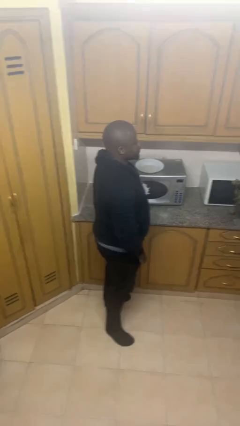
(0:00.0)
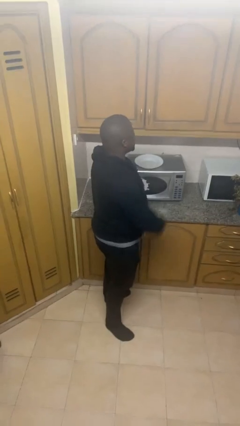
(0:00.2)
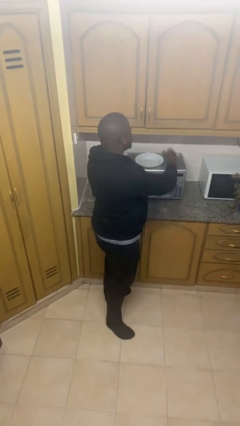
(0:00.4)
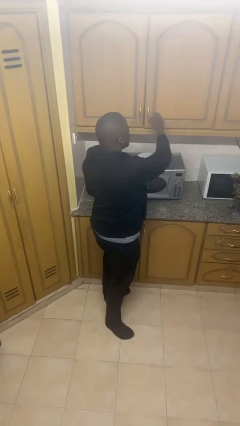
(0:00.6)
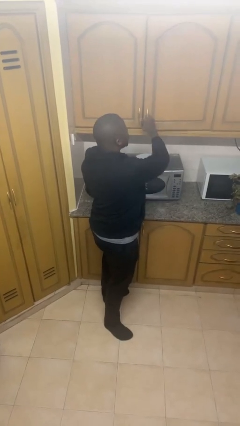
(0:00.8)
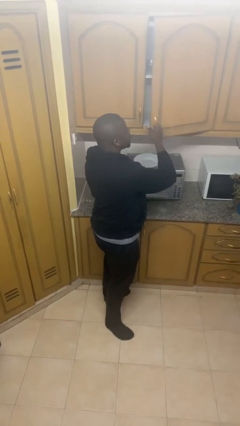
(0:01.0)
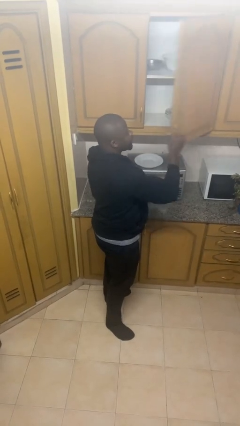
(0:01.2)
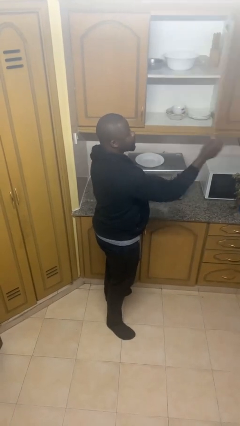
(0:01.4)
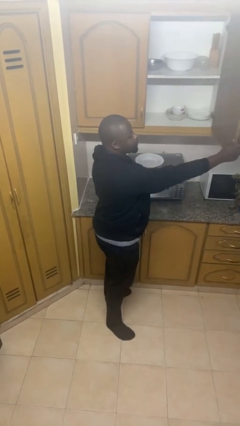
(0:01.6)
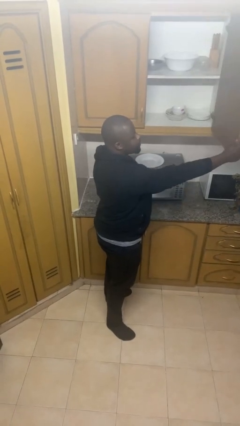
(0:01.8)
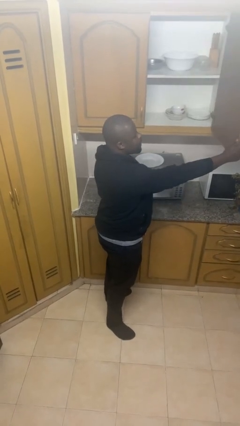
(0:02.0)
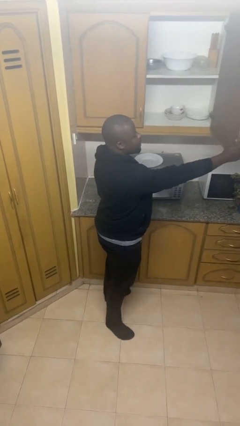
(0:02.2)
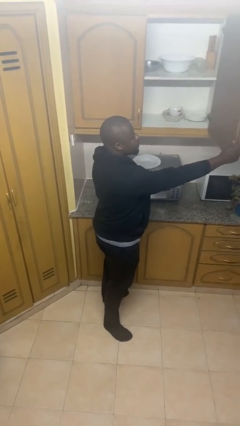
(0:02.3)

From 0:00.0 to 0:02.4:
person opens cabinet

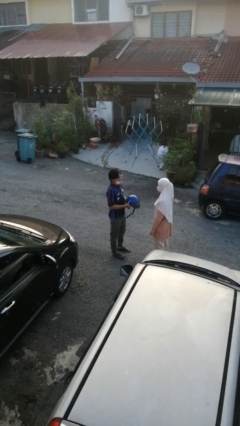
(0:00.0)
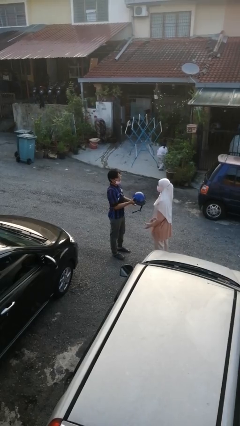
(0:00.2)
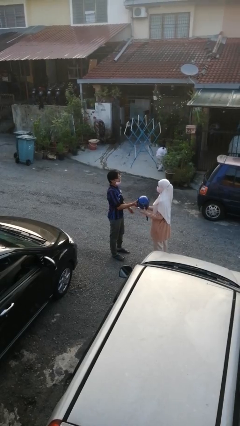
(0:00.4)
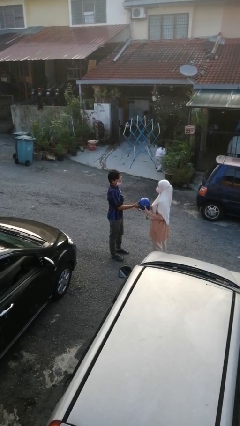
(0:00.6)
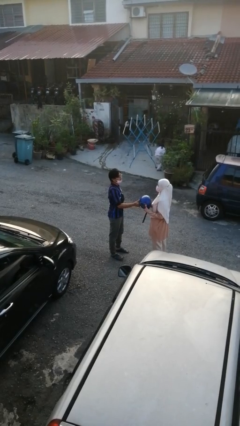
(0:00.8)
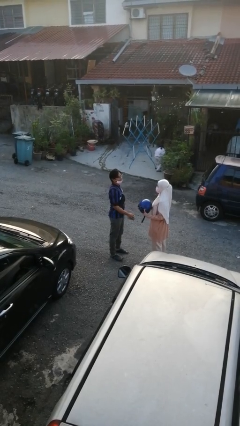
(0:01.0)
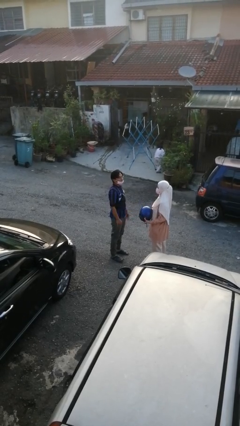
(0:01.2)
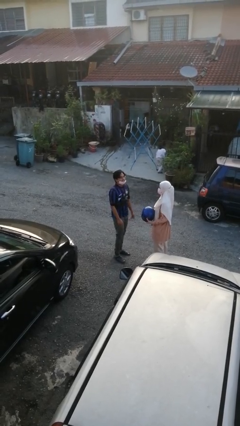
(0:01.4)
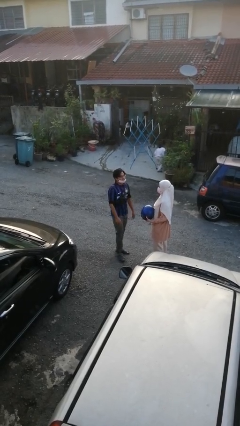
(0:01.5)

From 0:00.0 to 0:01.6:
person transfers object to person

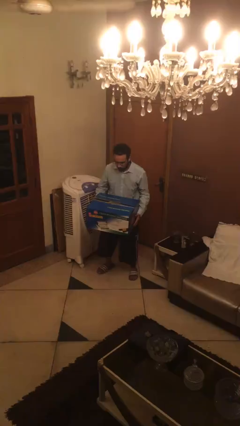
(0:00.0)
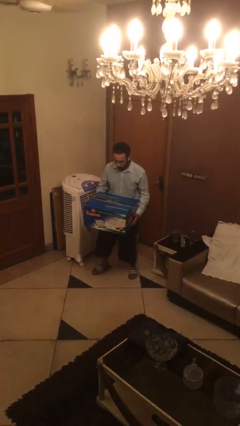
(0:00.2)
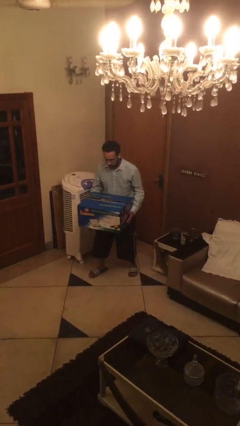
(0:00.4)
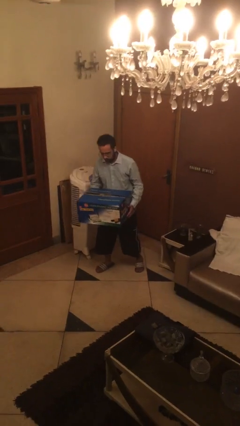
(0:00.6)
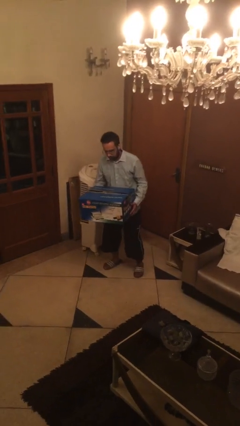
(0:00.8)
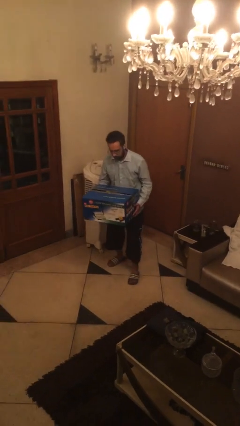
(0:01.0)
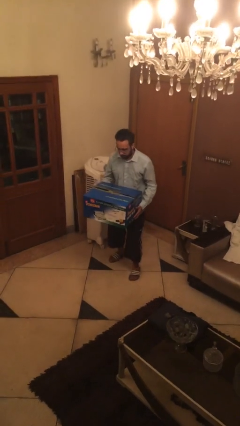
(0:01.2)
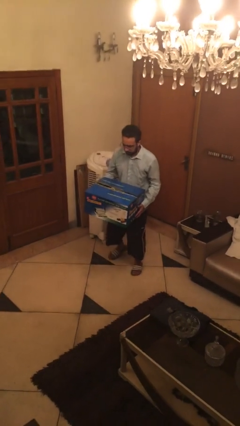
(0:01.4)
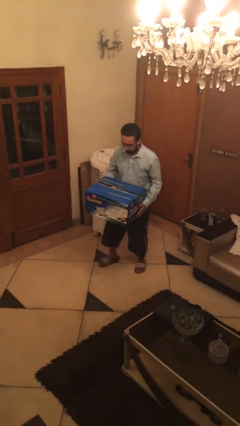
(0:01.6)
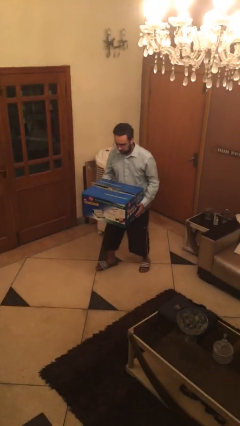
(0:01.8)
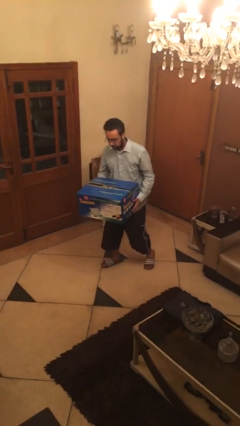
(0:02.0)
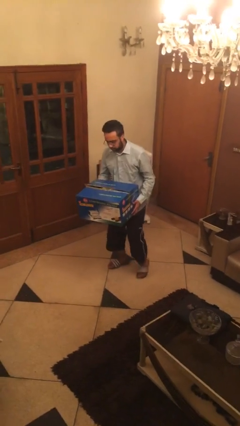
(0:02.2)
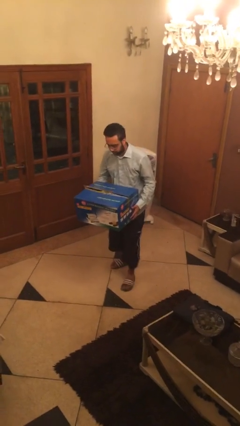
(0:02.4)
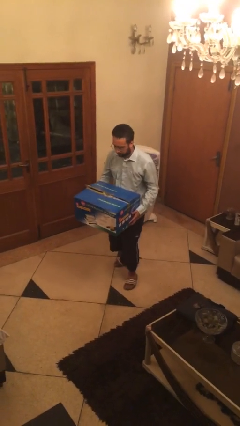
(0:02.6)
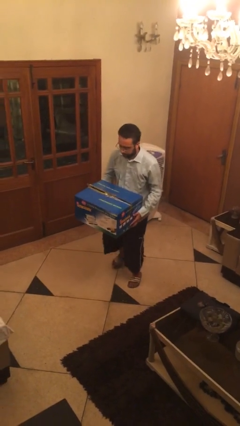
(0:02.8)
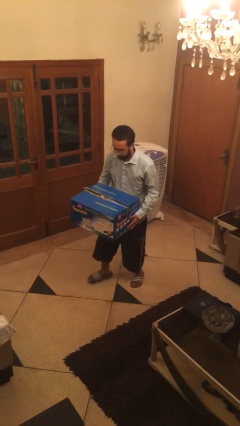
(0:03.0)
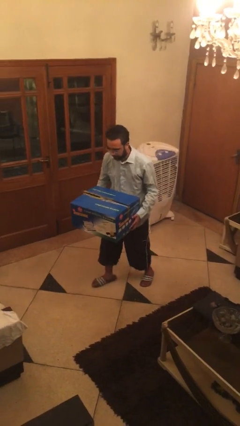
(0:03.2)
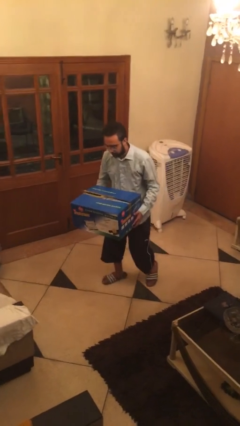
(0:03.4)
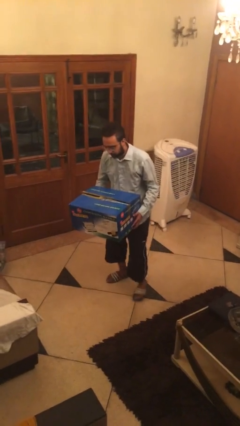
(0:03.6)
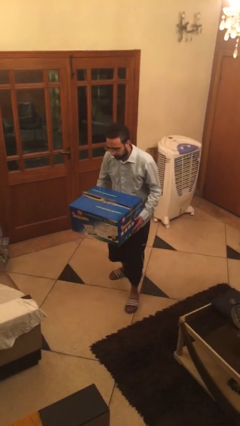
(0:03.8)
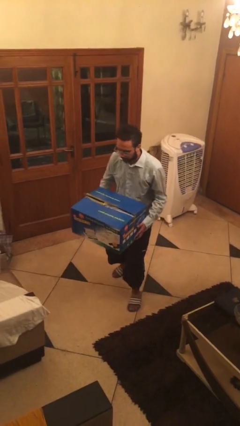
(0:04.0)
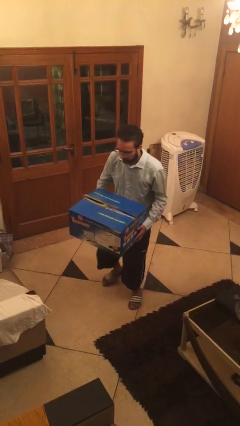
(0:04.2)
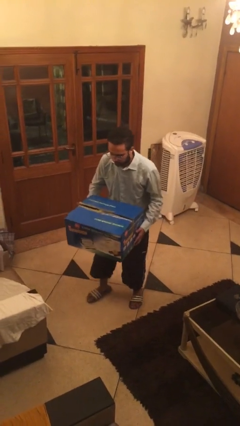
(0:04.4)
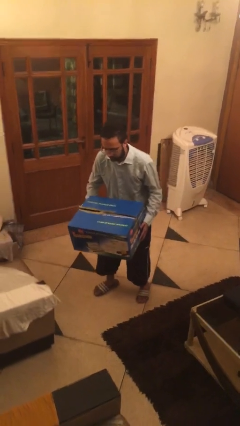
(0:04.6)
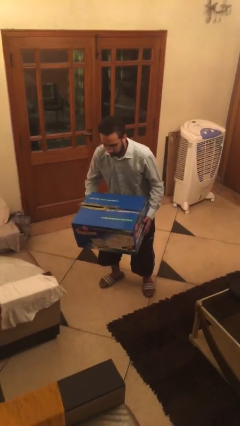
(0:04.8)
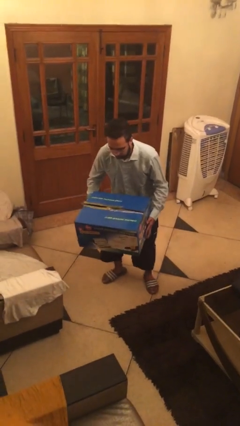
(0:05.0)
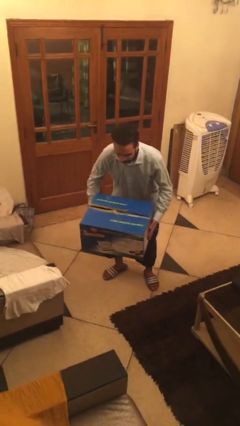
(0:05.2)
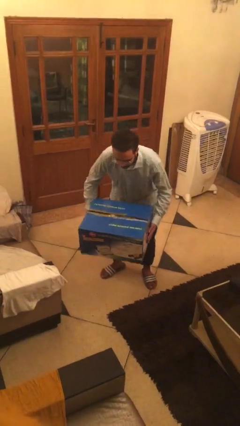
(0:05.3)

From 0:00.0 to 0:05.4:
person carries heavy object

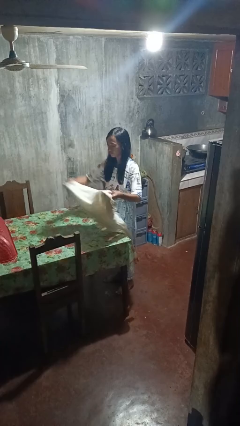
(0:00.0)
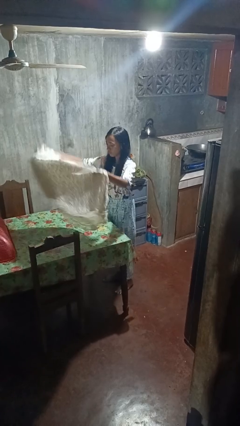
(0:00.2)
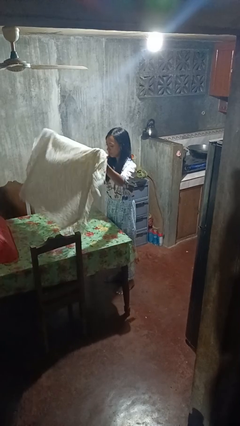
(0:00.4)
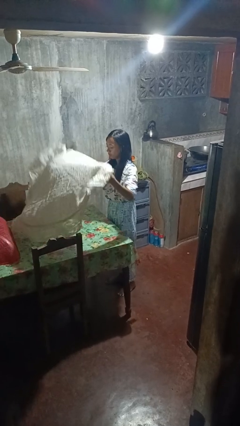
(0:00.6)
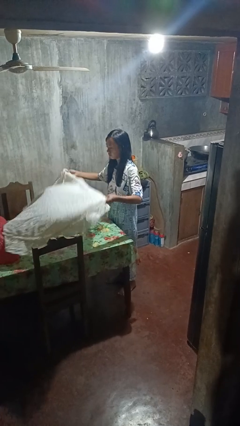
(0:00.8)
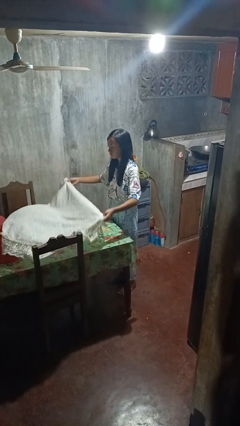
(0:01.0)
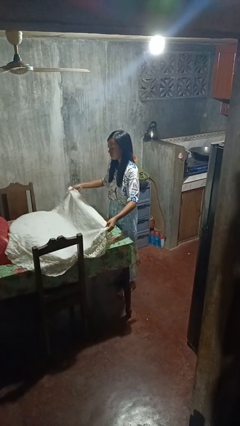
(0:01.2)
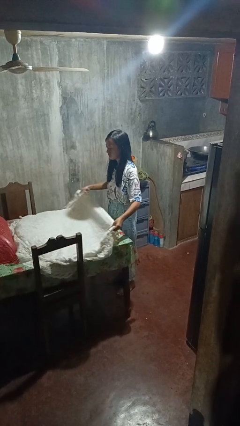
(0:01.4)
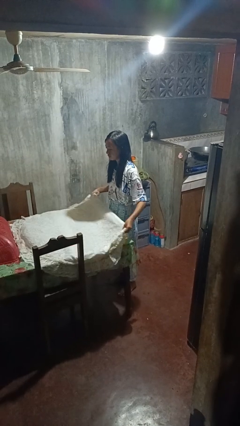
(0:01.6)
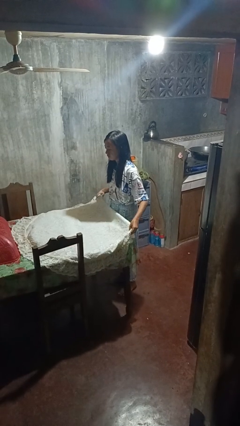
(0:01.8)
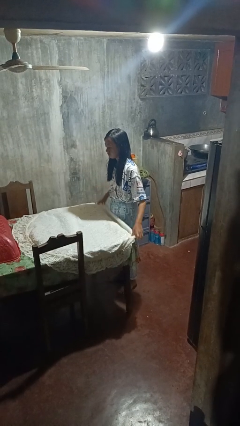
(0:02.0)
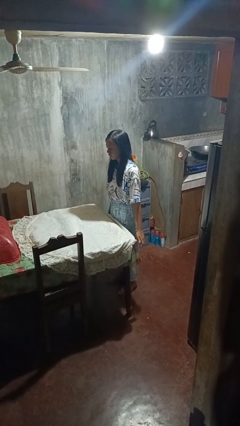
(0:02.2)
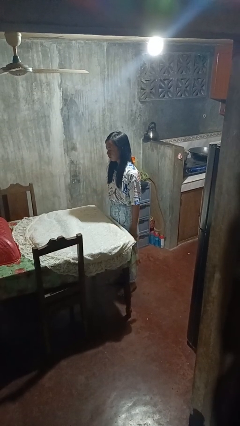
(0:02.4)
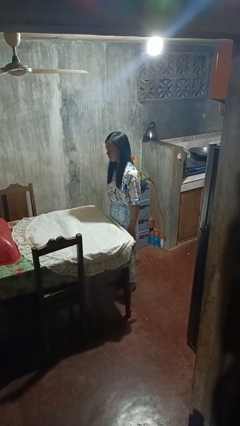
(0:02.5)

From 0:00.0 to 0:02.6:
person spreads tablecloth

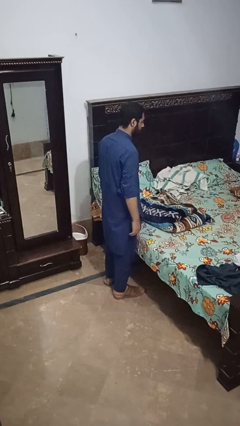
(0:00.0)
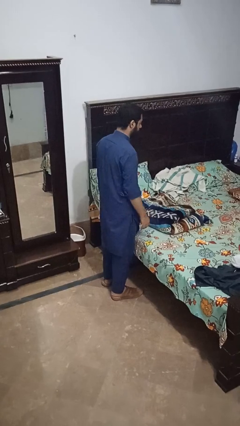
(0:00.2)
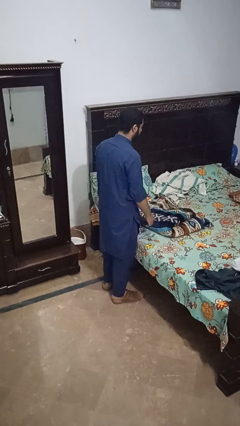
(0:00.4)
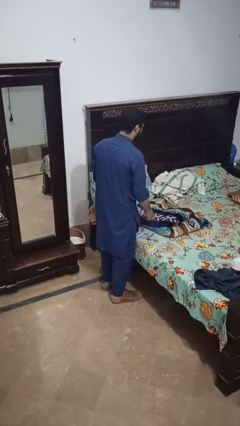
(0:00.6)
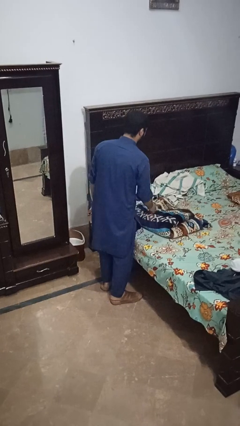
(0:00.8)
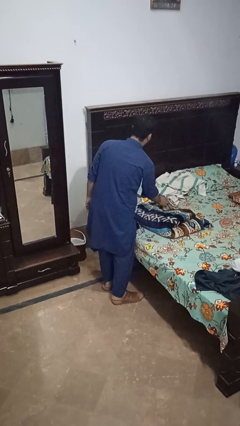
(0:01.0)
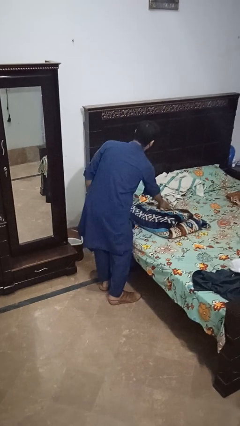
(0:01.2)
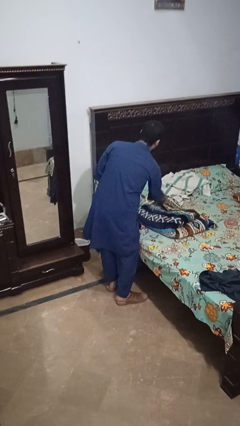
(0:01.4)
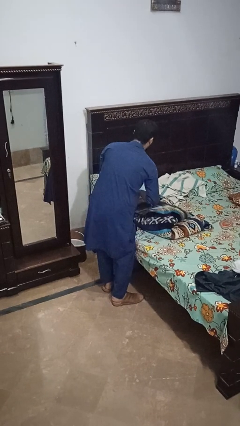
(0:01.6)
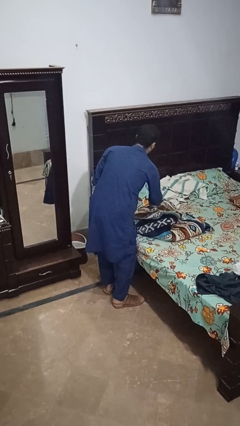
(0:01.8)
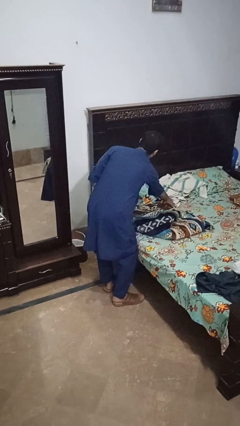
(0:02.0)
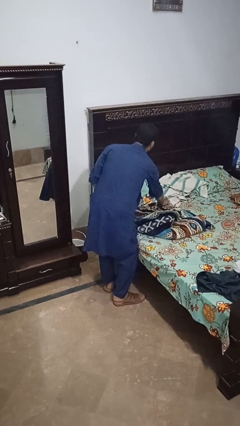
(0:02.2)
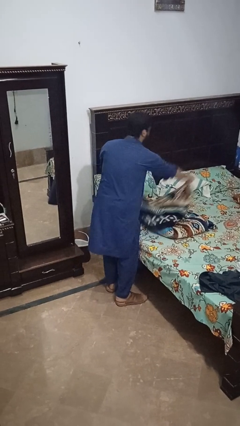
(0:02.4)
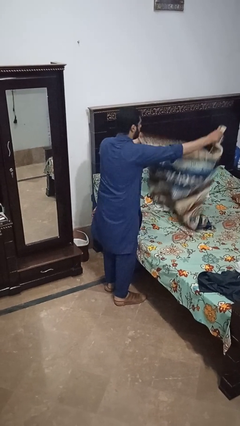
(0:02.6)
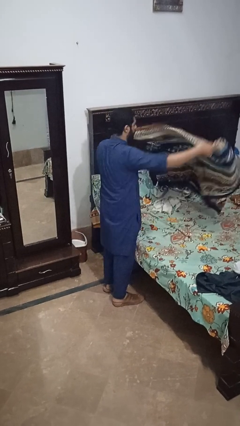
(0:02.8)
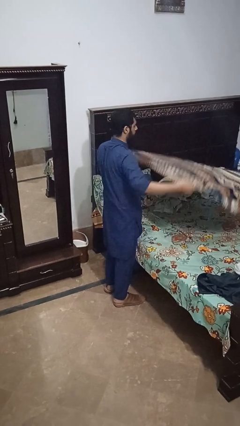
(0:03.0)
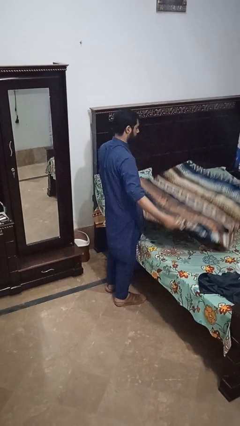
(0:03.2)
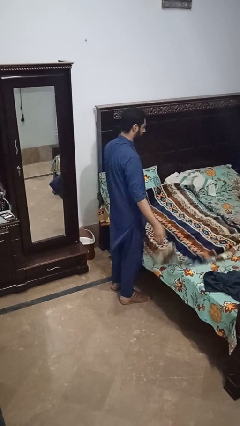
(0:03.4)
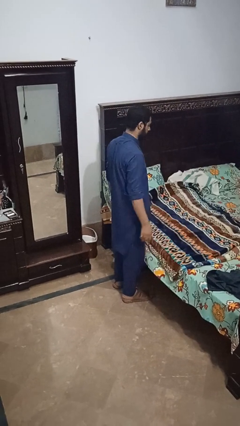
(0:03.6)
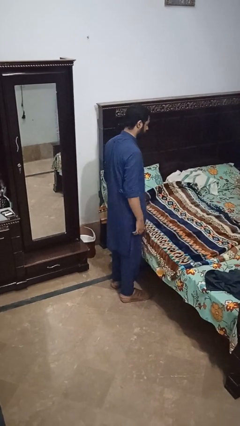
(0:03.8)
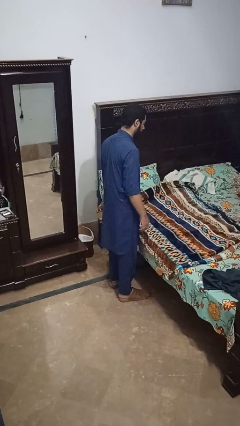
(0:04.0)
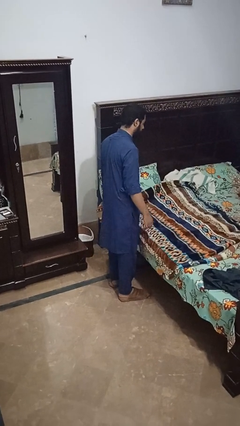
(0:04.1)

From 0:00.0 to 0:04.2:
person unfolds blanket

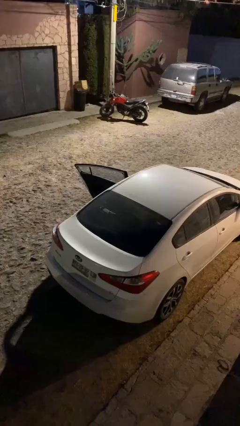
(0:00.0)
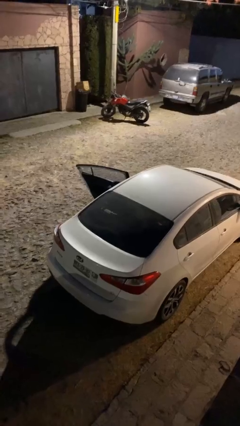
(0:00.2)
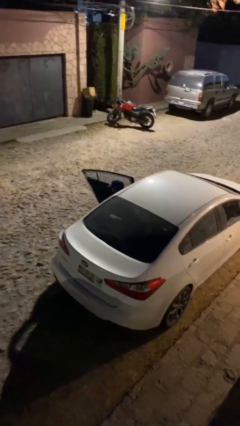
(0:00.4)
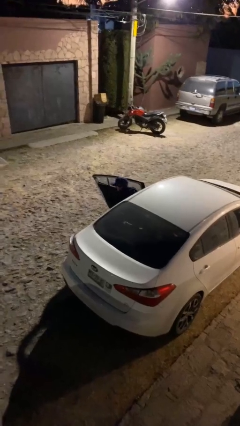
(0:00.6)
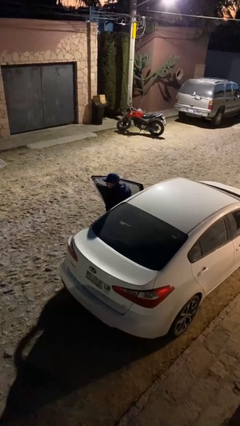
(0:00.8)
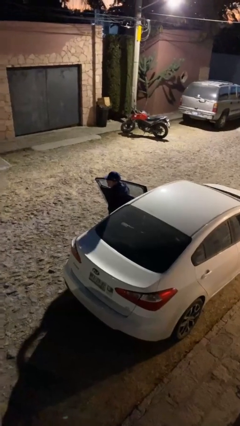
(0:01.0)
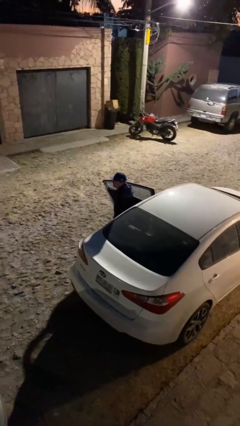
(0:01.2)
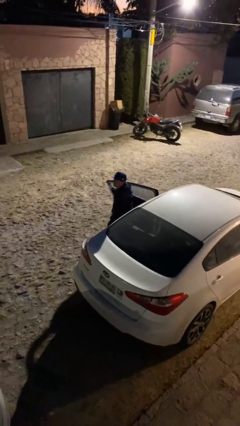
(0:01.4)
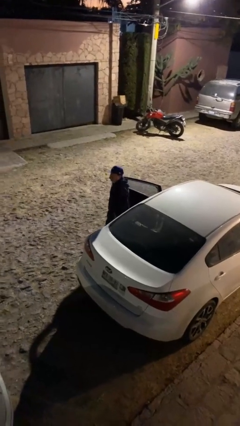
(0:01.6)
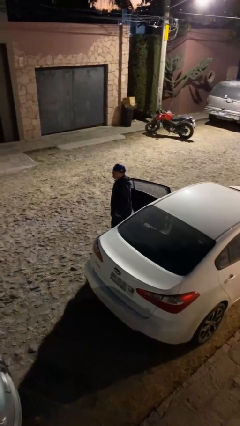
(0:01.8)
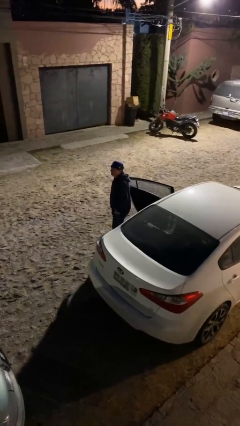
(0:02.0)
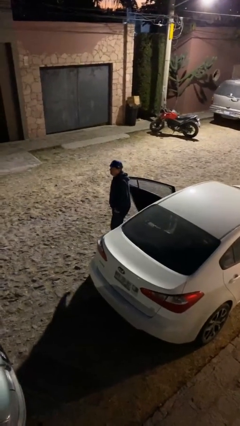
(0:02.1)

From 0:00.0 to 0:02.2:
person exits car
